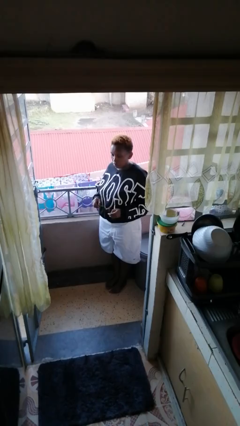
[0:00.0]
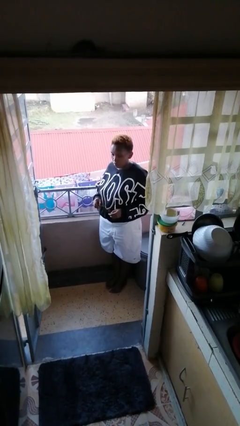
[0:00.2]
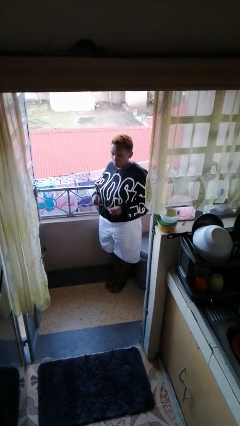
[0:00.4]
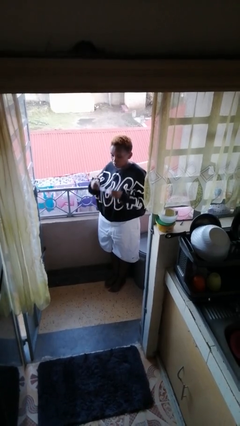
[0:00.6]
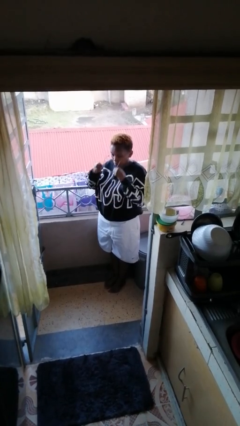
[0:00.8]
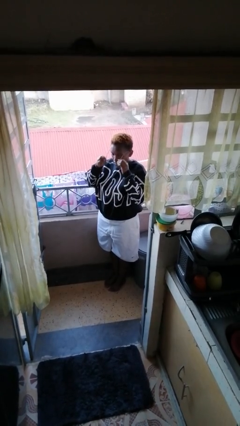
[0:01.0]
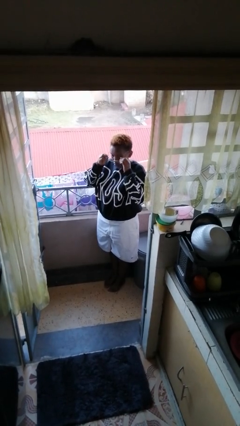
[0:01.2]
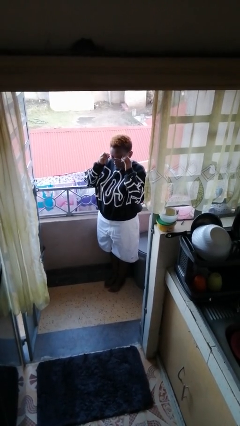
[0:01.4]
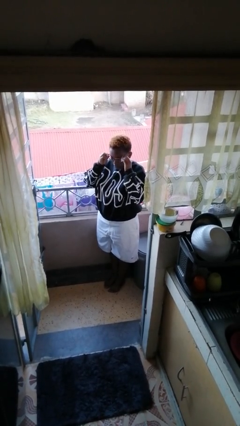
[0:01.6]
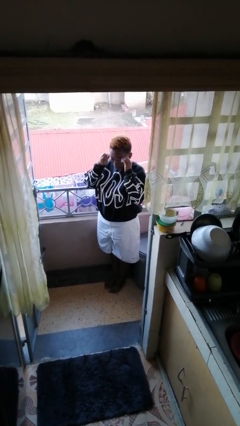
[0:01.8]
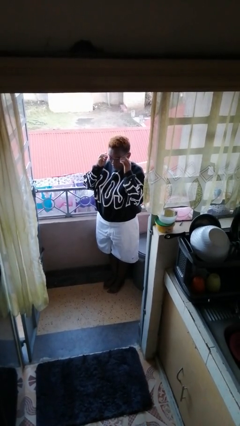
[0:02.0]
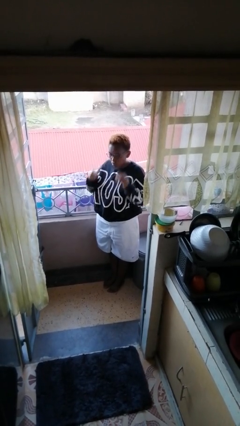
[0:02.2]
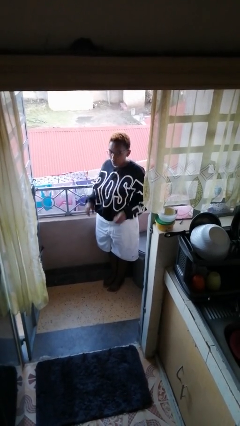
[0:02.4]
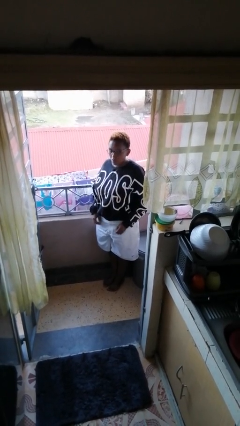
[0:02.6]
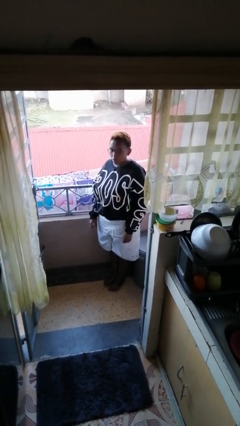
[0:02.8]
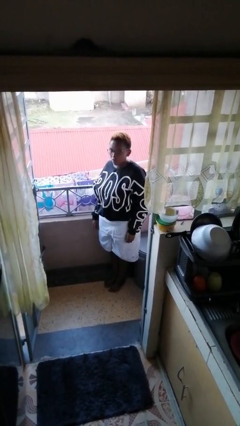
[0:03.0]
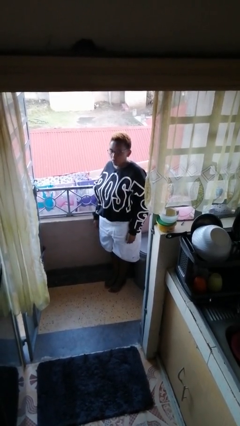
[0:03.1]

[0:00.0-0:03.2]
person puts on glasses

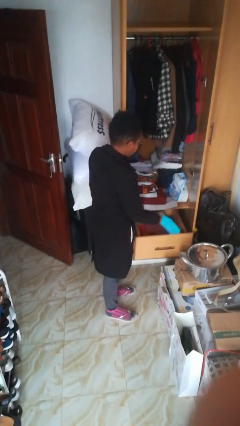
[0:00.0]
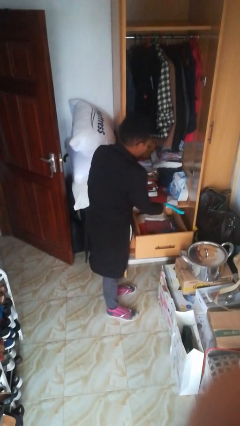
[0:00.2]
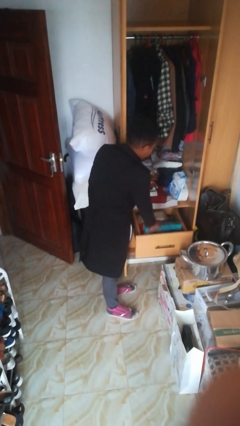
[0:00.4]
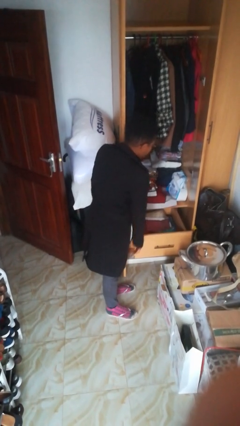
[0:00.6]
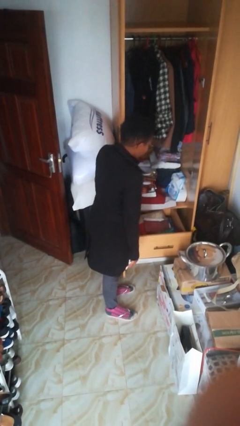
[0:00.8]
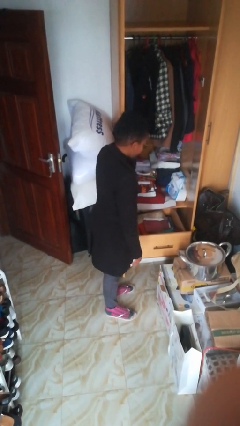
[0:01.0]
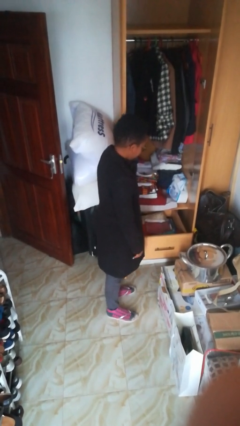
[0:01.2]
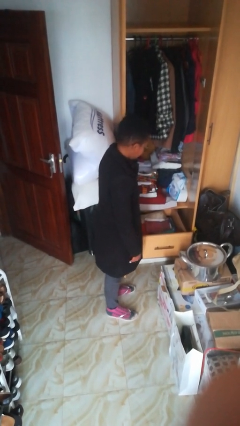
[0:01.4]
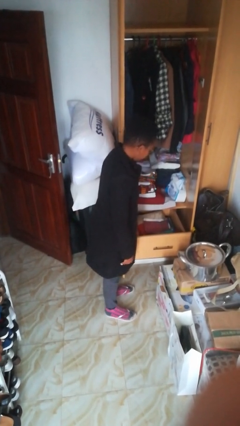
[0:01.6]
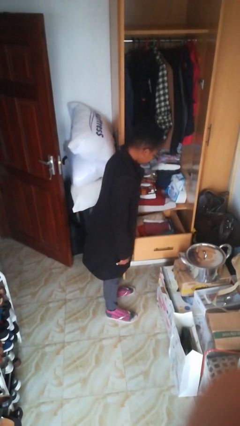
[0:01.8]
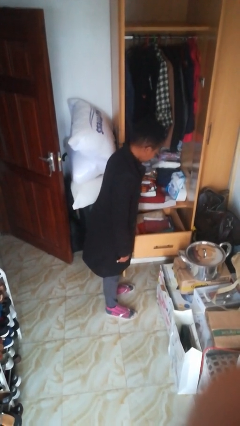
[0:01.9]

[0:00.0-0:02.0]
person puts clothes into dresser

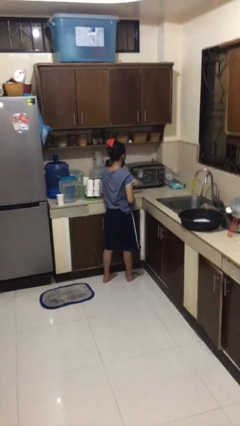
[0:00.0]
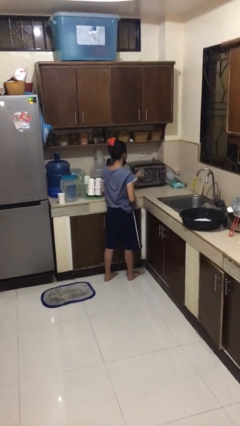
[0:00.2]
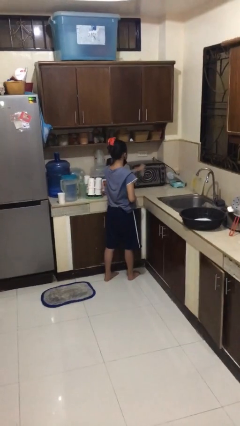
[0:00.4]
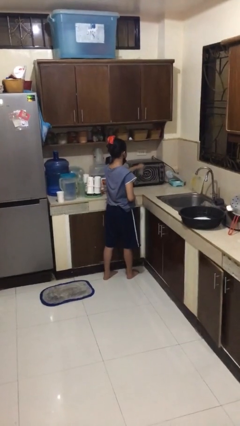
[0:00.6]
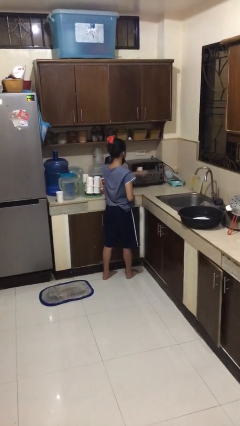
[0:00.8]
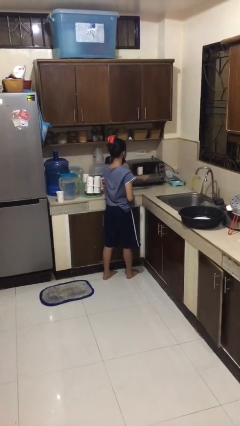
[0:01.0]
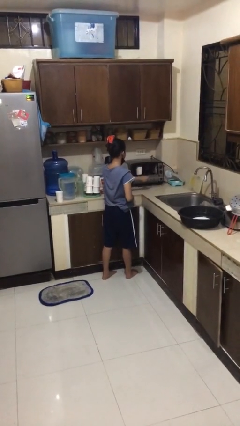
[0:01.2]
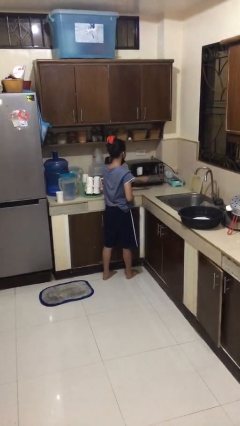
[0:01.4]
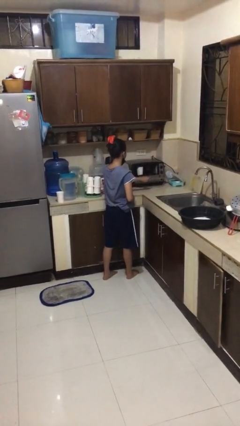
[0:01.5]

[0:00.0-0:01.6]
person opens microwave

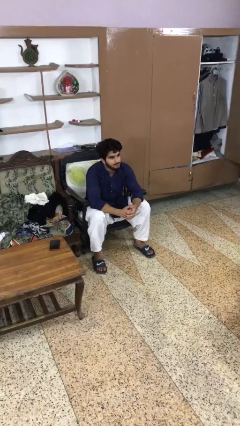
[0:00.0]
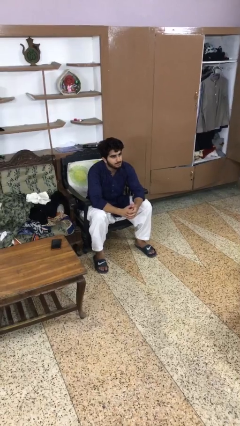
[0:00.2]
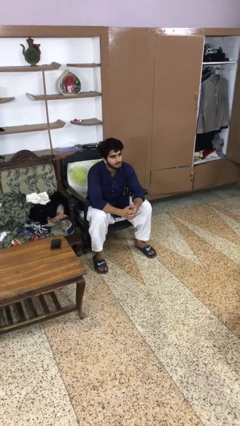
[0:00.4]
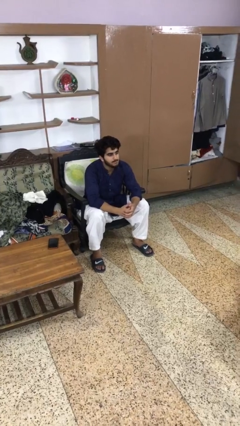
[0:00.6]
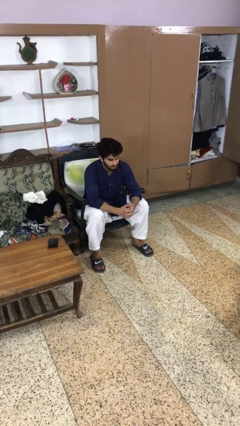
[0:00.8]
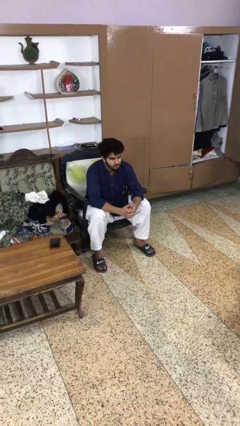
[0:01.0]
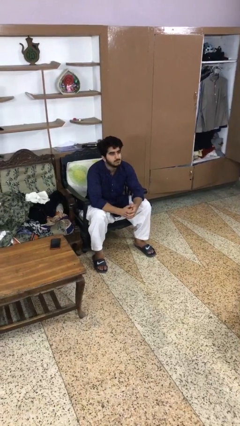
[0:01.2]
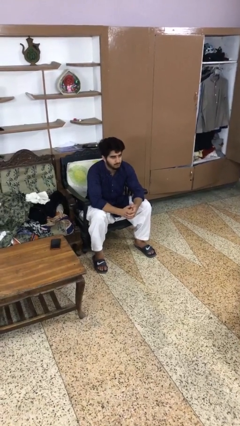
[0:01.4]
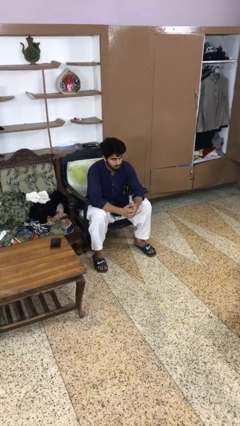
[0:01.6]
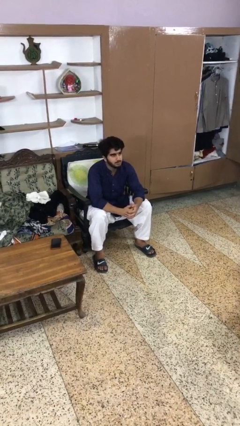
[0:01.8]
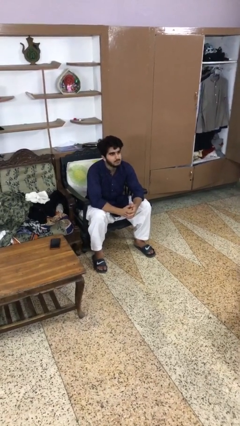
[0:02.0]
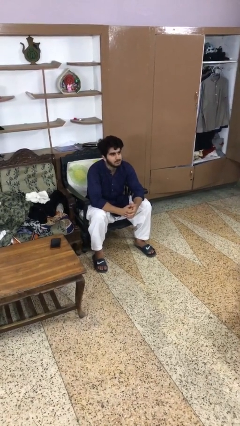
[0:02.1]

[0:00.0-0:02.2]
person nods head

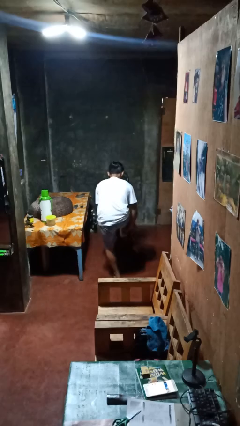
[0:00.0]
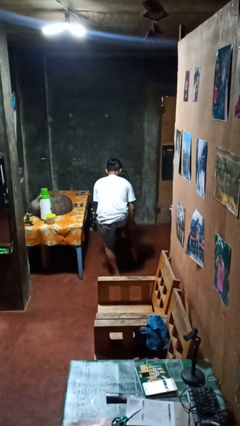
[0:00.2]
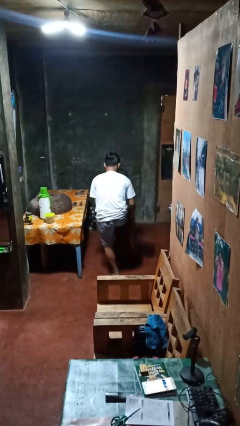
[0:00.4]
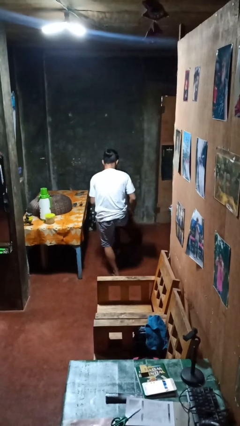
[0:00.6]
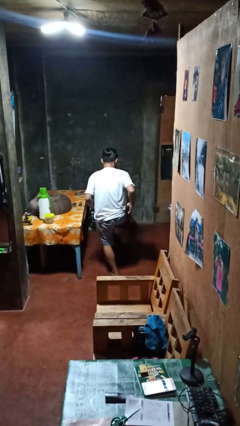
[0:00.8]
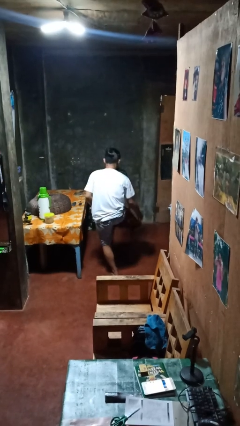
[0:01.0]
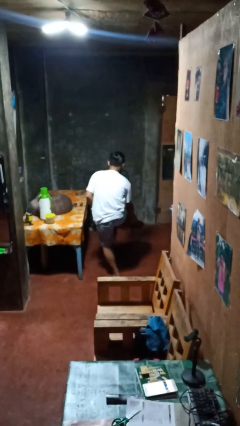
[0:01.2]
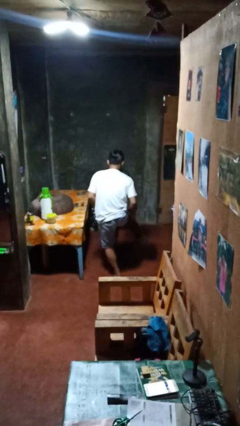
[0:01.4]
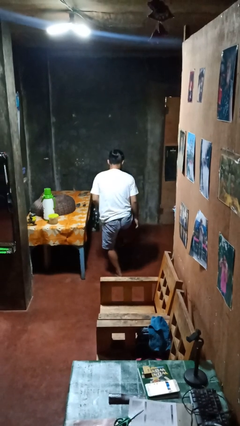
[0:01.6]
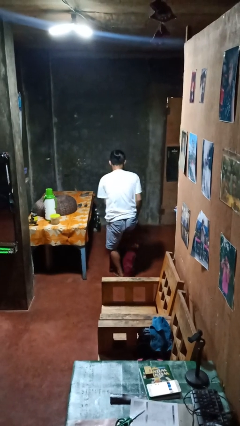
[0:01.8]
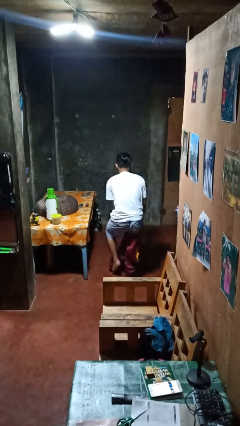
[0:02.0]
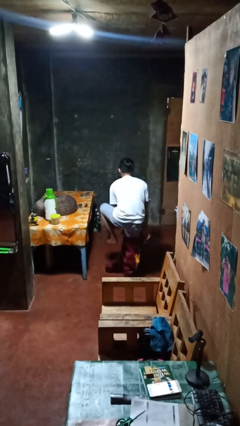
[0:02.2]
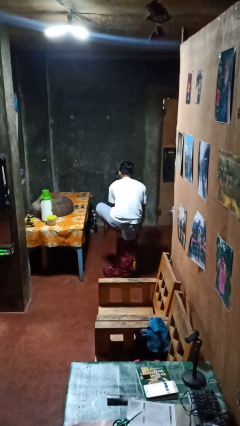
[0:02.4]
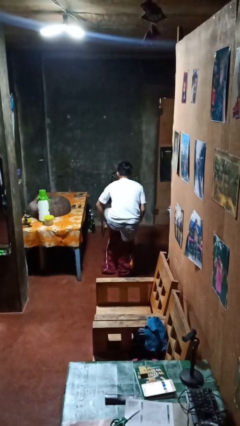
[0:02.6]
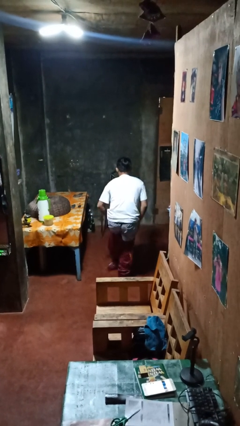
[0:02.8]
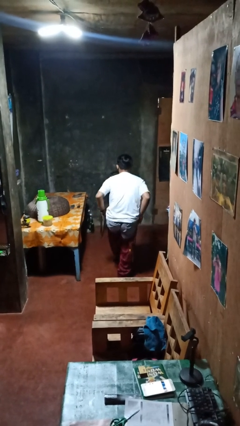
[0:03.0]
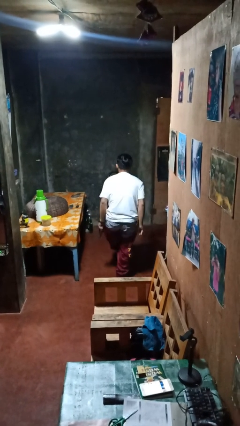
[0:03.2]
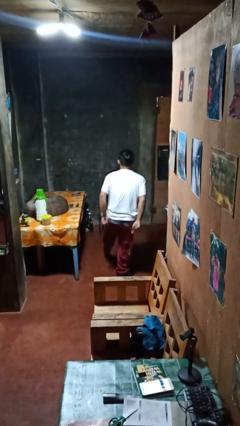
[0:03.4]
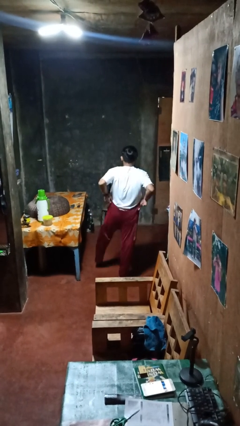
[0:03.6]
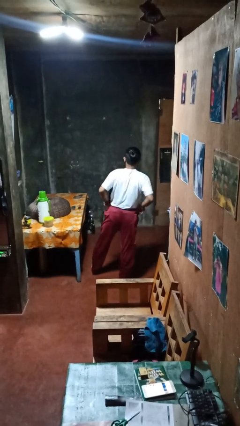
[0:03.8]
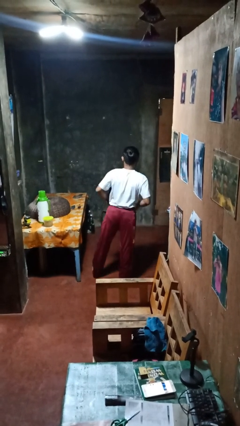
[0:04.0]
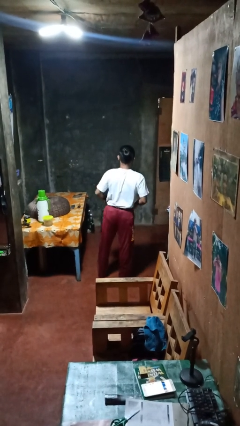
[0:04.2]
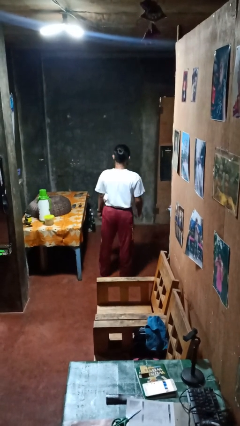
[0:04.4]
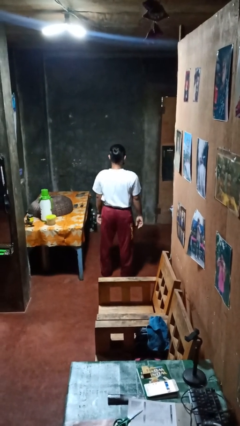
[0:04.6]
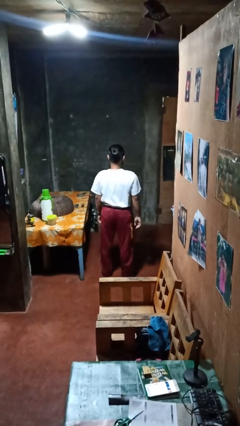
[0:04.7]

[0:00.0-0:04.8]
person puts on pants

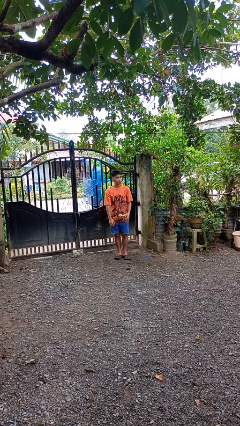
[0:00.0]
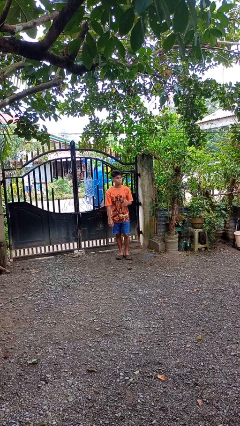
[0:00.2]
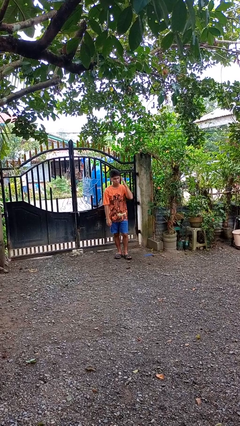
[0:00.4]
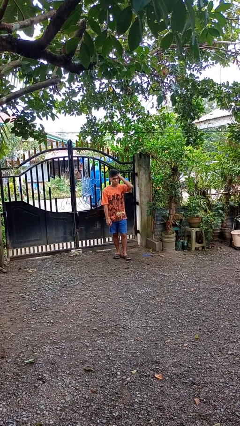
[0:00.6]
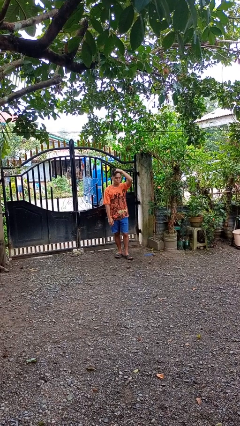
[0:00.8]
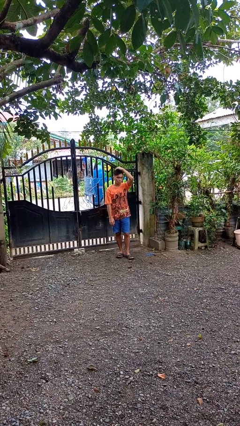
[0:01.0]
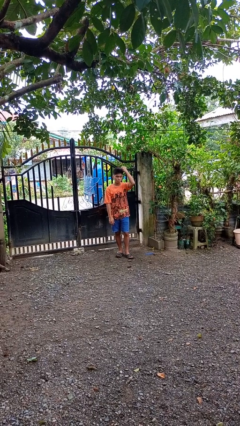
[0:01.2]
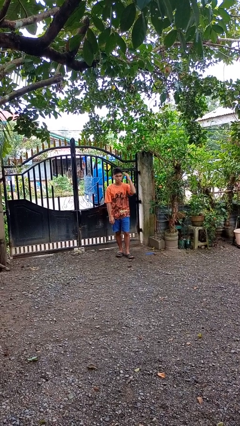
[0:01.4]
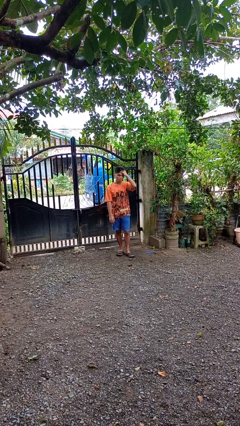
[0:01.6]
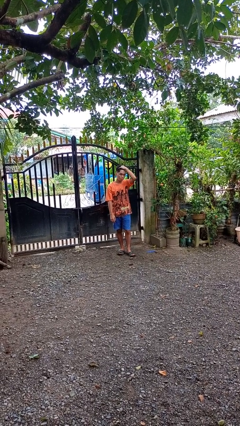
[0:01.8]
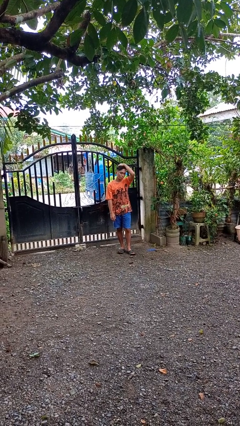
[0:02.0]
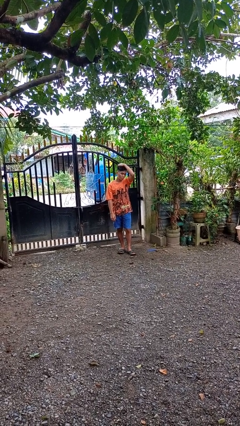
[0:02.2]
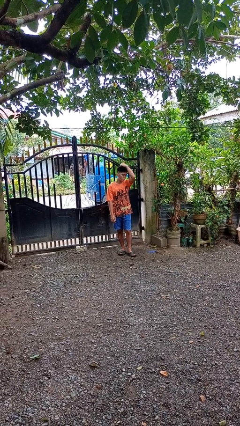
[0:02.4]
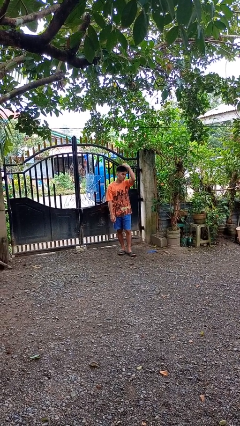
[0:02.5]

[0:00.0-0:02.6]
person strokes hair

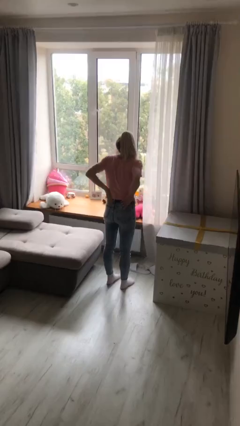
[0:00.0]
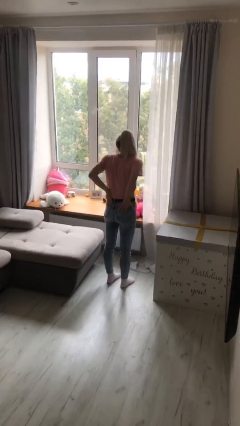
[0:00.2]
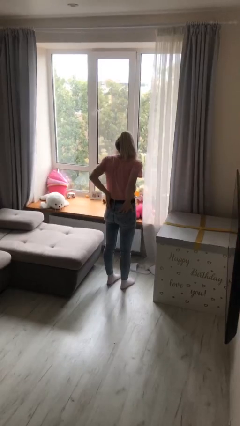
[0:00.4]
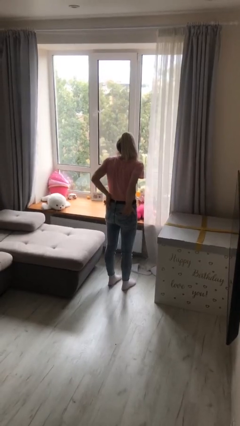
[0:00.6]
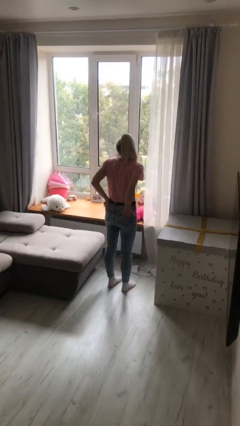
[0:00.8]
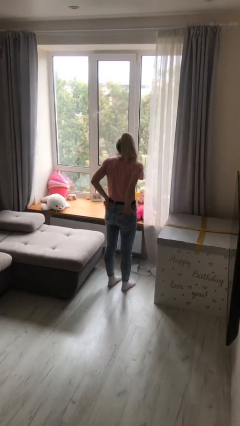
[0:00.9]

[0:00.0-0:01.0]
person puts hands in back pockets
